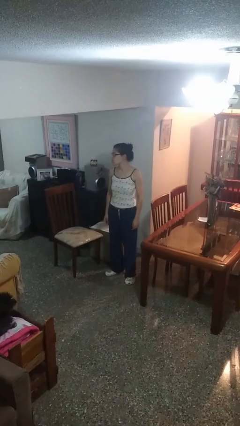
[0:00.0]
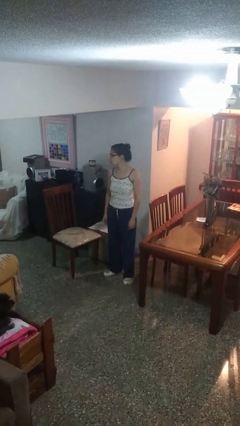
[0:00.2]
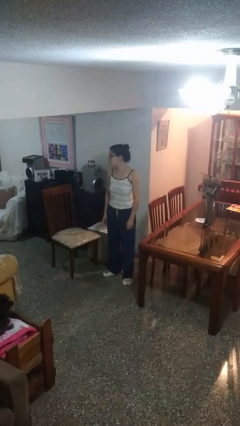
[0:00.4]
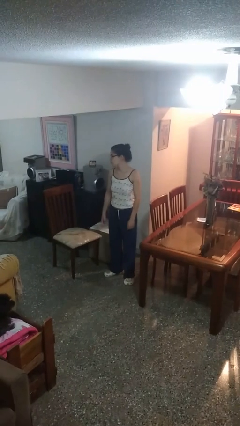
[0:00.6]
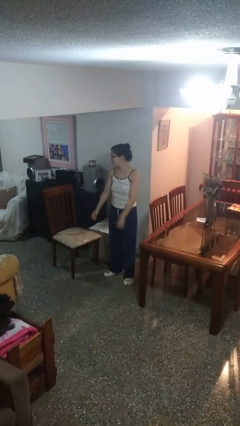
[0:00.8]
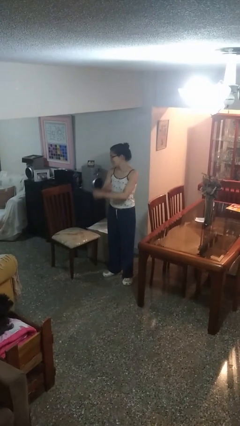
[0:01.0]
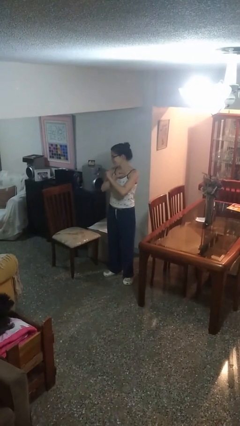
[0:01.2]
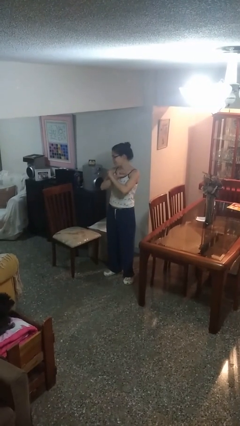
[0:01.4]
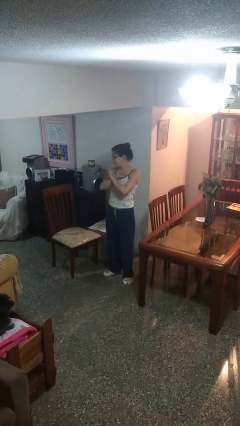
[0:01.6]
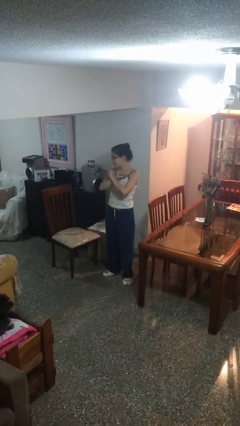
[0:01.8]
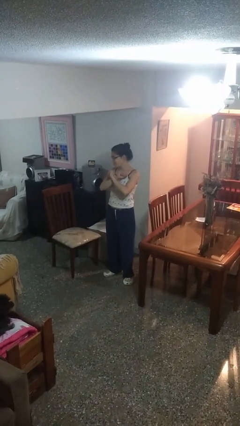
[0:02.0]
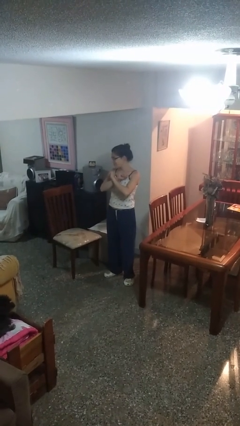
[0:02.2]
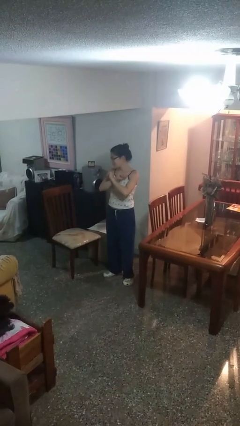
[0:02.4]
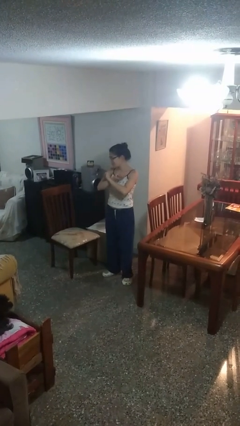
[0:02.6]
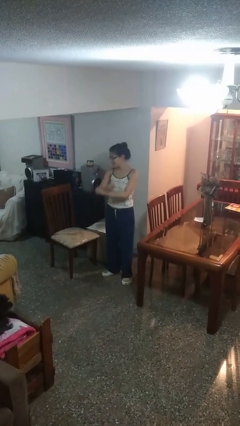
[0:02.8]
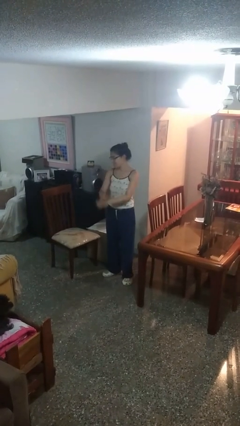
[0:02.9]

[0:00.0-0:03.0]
person gestures arms x

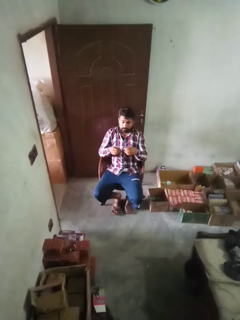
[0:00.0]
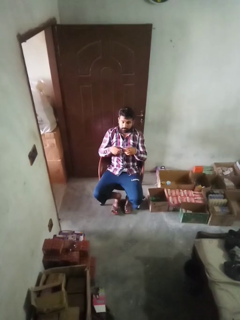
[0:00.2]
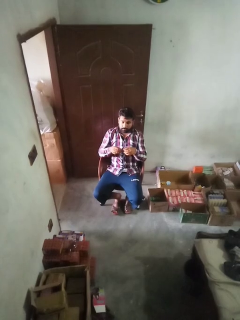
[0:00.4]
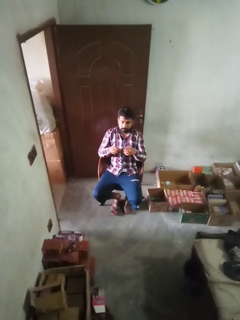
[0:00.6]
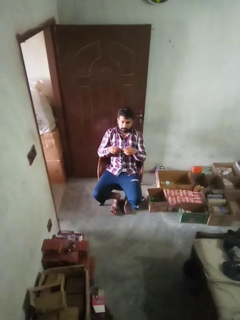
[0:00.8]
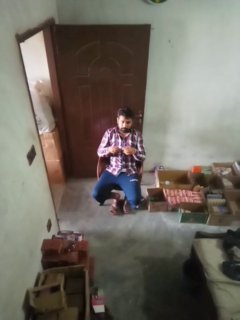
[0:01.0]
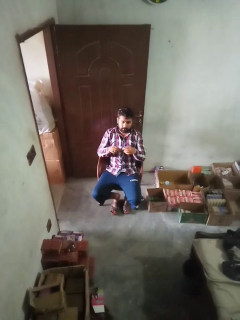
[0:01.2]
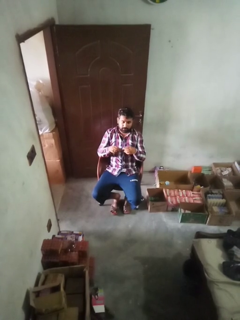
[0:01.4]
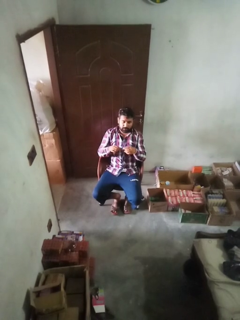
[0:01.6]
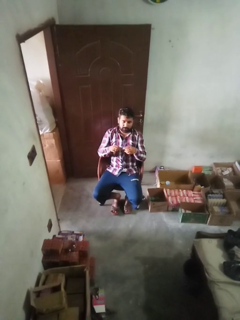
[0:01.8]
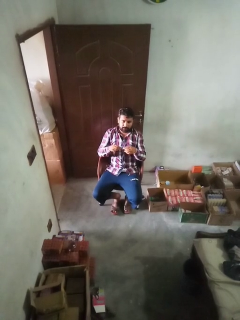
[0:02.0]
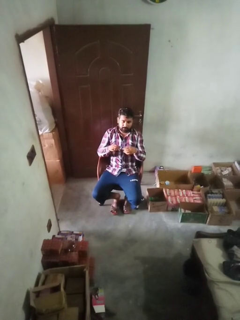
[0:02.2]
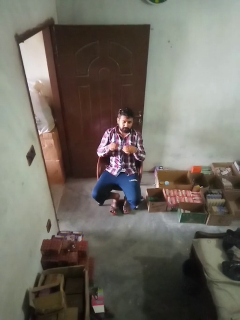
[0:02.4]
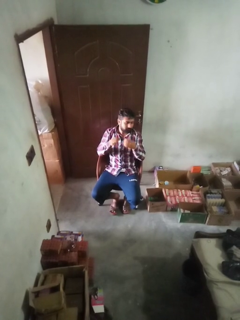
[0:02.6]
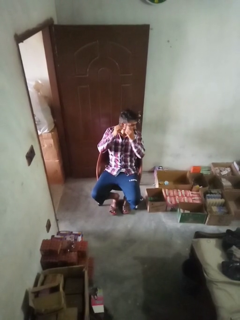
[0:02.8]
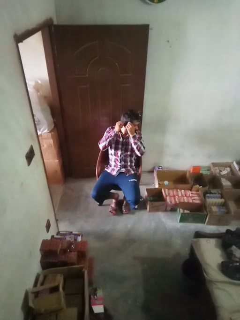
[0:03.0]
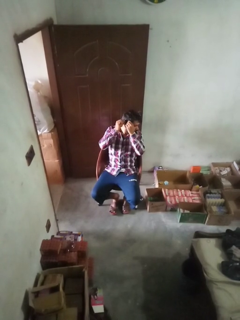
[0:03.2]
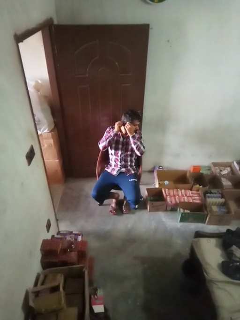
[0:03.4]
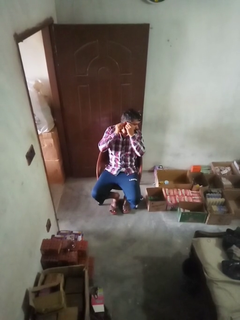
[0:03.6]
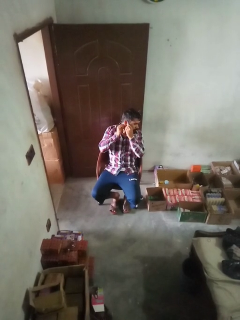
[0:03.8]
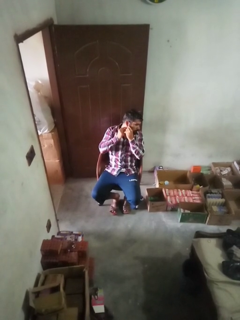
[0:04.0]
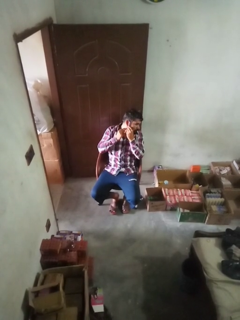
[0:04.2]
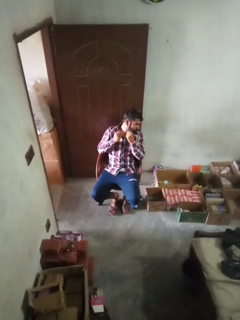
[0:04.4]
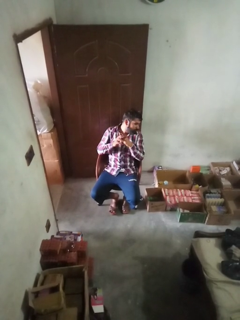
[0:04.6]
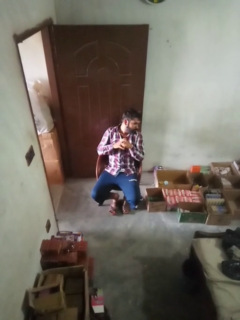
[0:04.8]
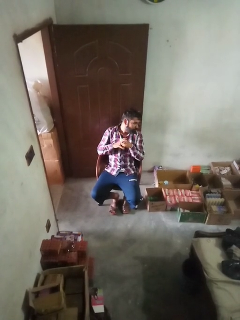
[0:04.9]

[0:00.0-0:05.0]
person puts on earrings

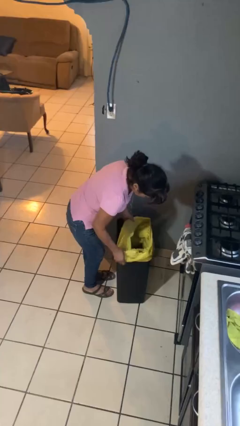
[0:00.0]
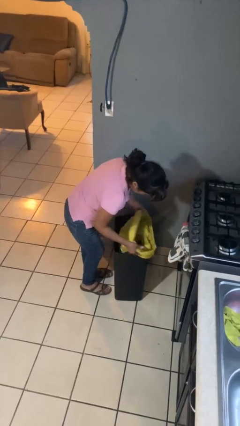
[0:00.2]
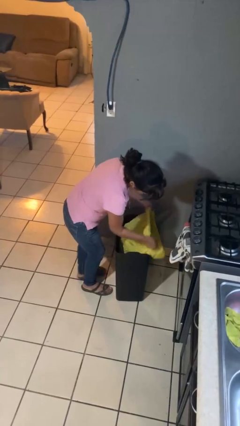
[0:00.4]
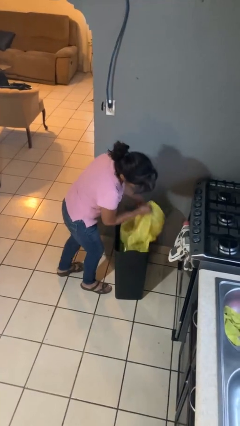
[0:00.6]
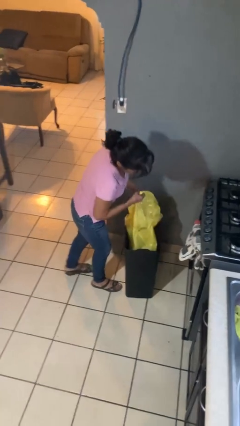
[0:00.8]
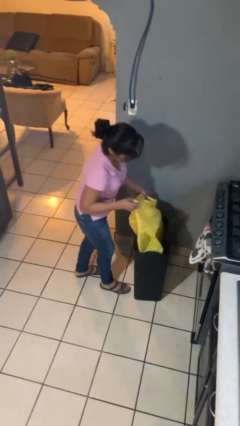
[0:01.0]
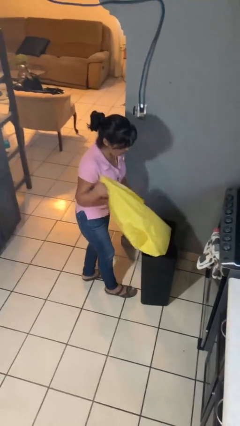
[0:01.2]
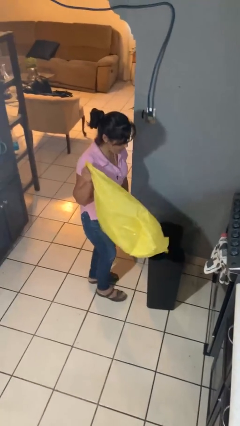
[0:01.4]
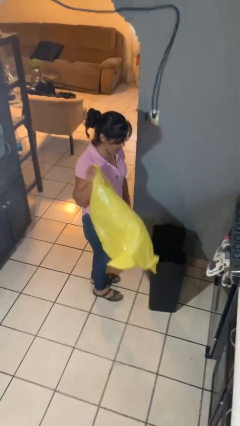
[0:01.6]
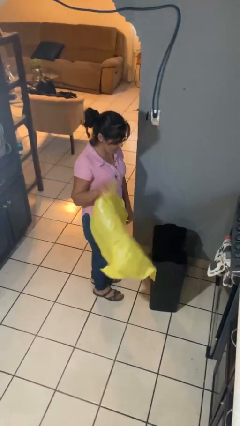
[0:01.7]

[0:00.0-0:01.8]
person removes trashbag from trashcan

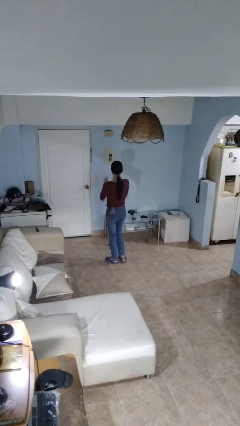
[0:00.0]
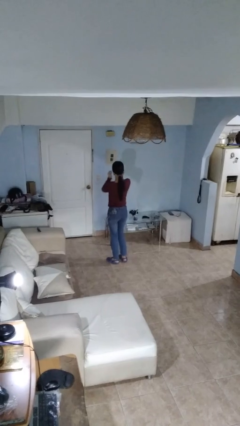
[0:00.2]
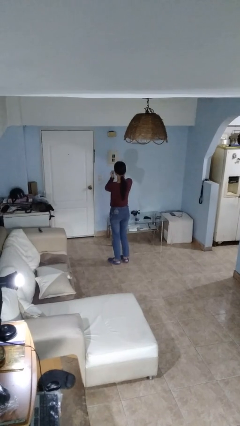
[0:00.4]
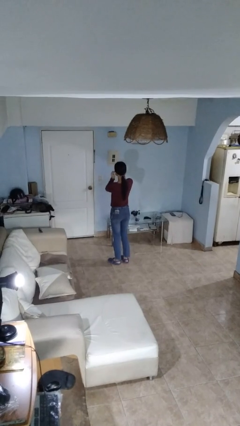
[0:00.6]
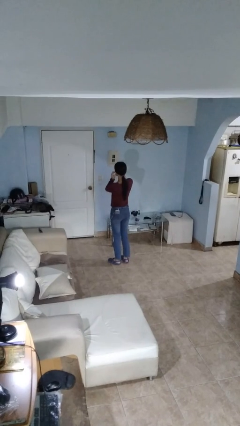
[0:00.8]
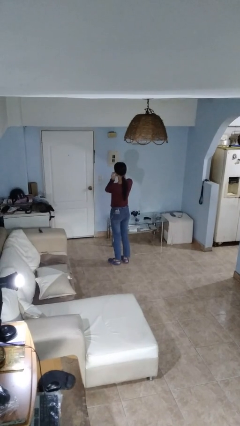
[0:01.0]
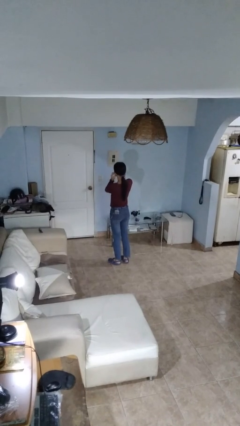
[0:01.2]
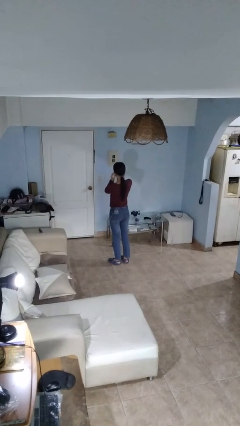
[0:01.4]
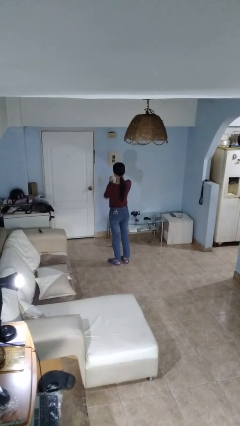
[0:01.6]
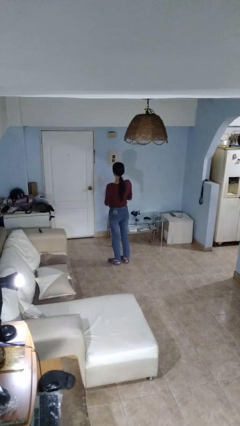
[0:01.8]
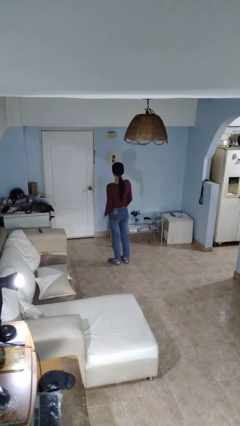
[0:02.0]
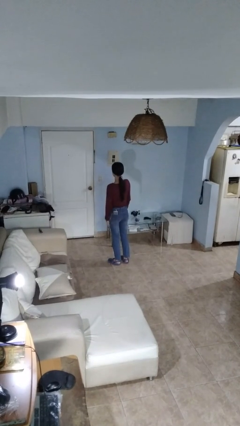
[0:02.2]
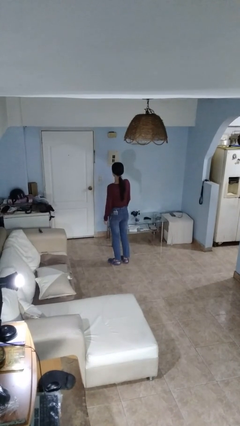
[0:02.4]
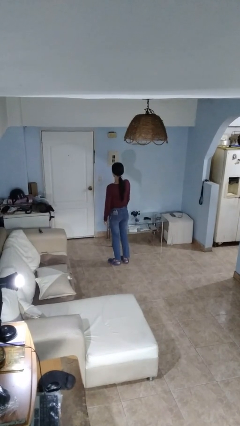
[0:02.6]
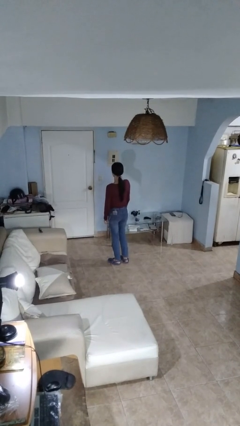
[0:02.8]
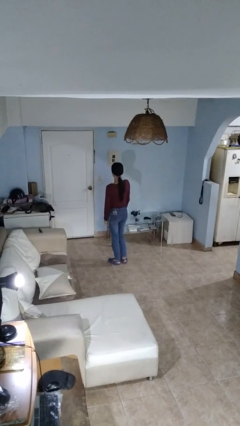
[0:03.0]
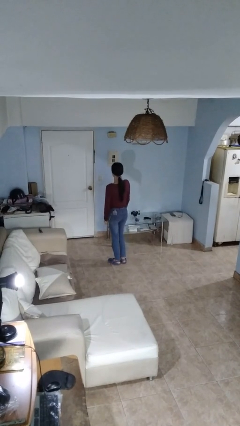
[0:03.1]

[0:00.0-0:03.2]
person puts on headphones

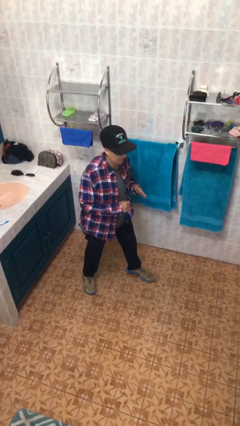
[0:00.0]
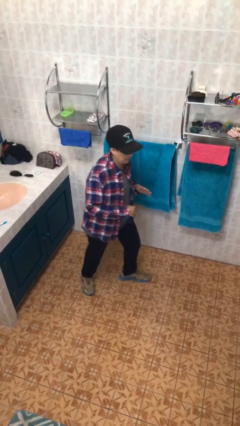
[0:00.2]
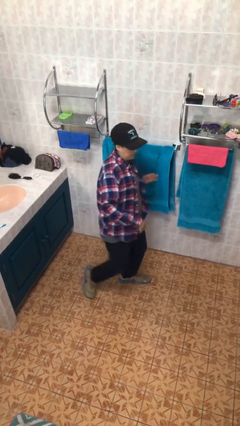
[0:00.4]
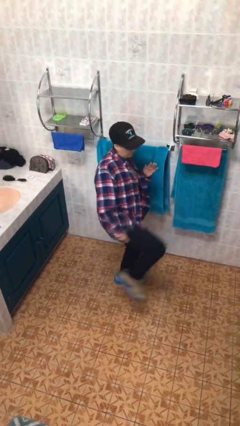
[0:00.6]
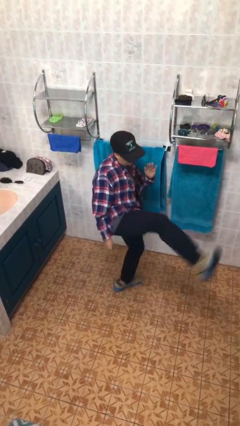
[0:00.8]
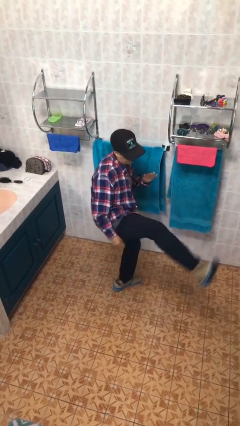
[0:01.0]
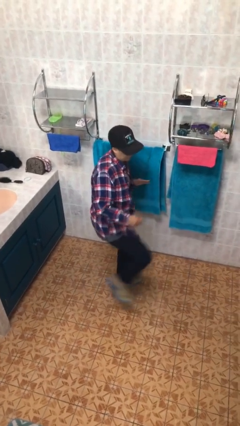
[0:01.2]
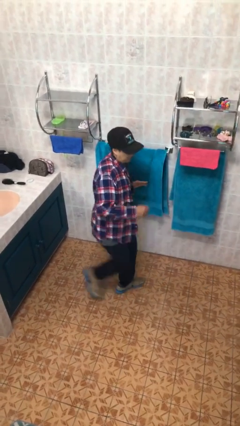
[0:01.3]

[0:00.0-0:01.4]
person karate kicks

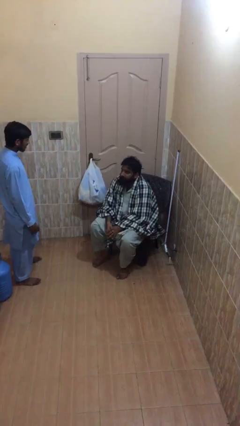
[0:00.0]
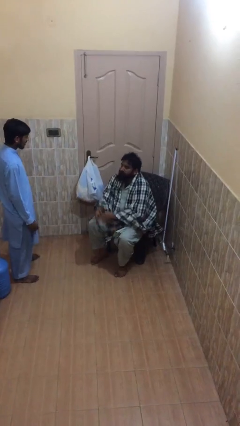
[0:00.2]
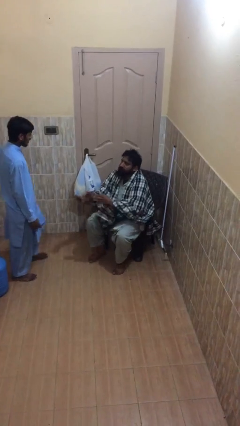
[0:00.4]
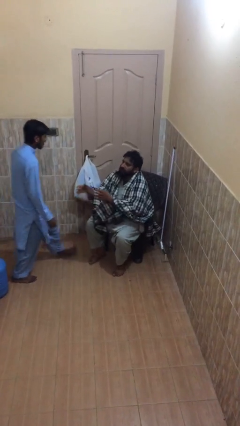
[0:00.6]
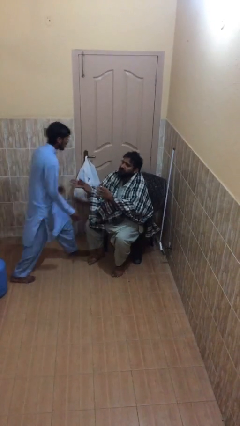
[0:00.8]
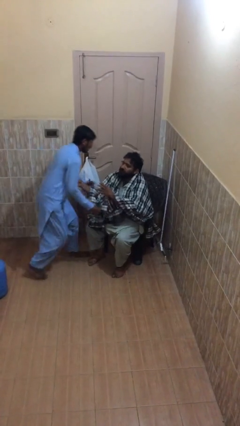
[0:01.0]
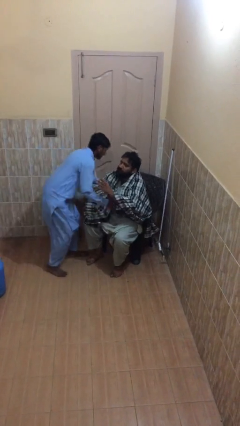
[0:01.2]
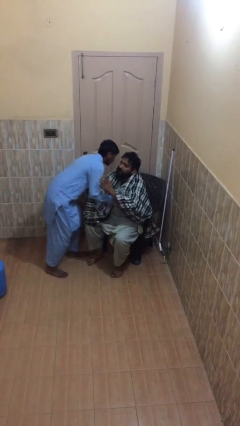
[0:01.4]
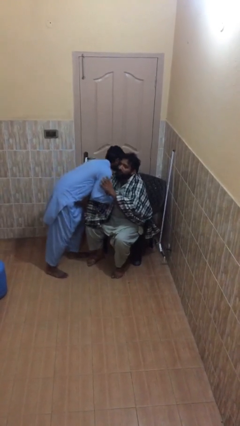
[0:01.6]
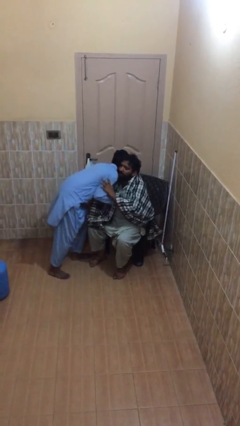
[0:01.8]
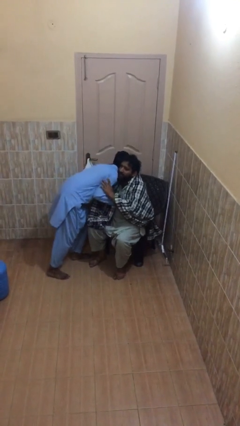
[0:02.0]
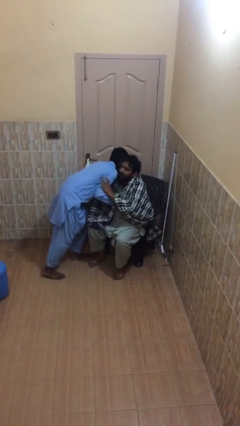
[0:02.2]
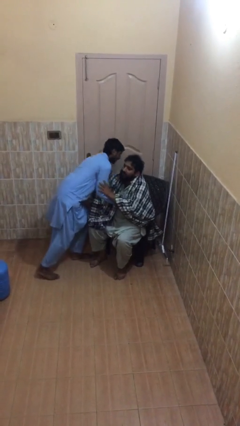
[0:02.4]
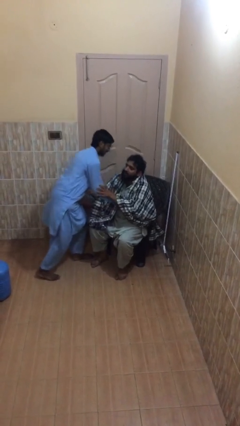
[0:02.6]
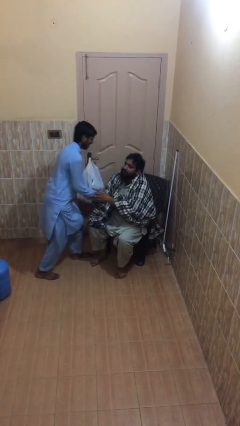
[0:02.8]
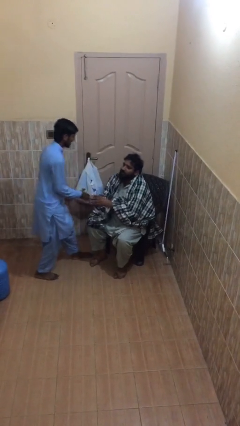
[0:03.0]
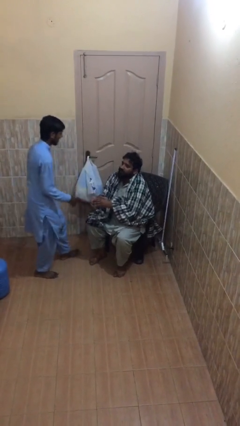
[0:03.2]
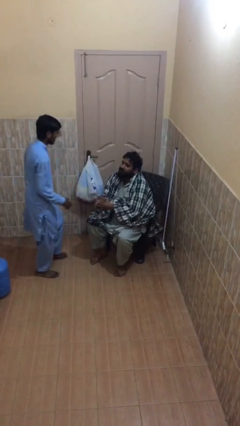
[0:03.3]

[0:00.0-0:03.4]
person embraces person

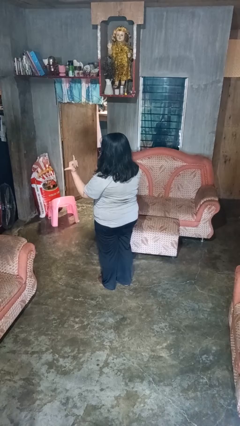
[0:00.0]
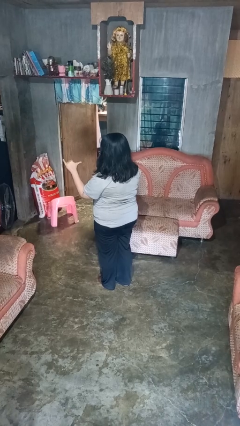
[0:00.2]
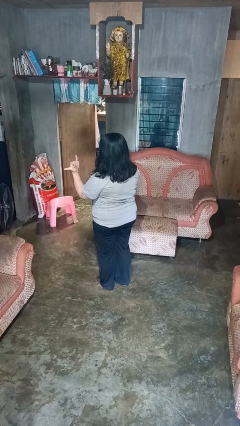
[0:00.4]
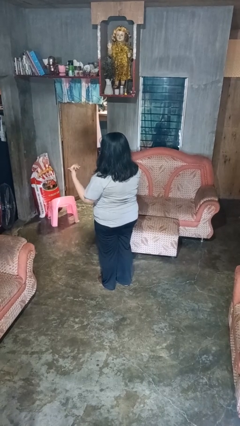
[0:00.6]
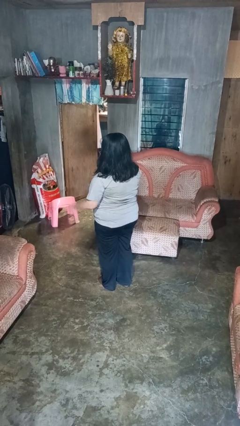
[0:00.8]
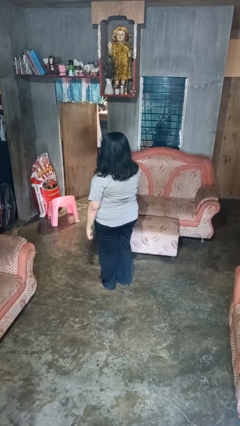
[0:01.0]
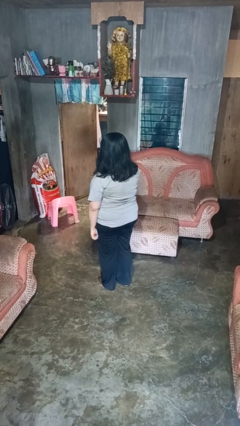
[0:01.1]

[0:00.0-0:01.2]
person gestures hang loose
